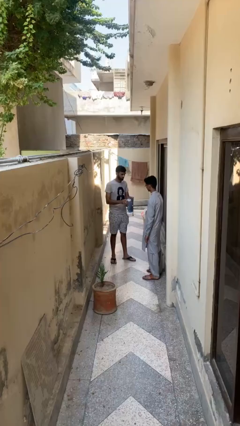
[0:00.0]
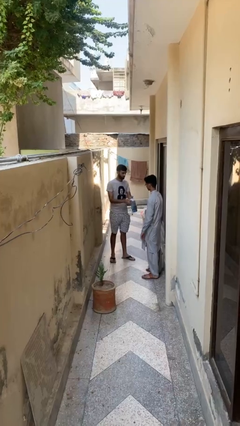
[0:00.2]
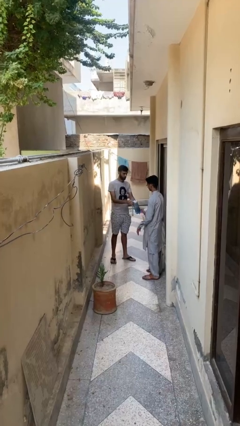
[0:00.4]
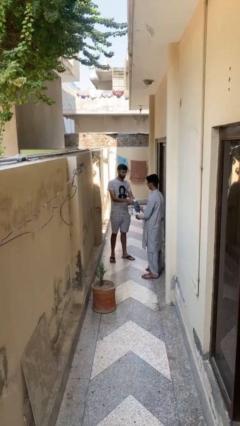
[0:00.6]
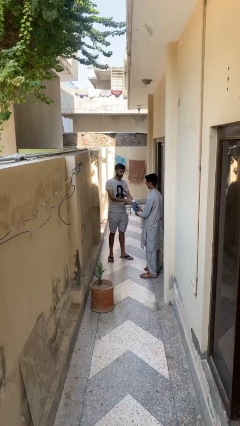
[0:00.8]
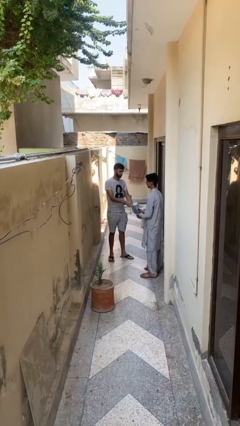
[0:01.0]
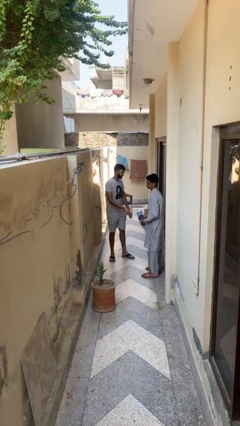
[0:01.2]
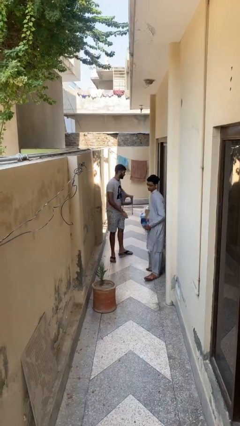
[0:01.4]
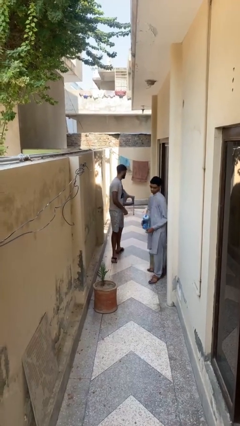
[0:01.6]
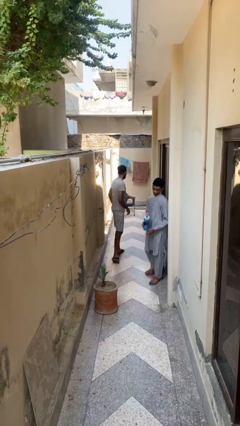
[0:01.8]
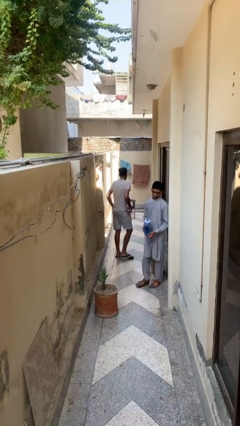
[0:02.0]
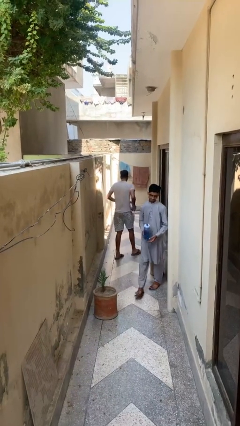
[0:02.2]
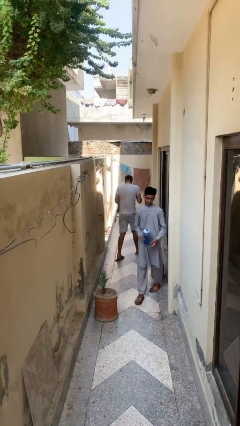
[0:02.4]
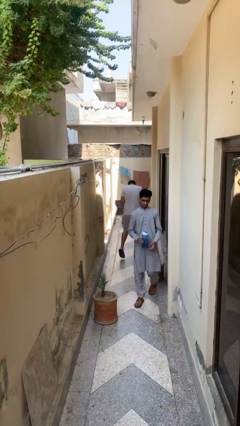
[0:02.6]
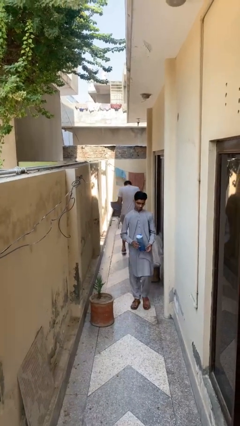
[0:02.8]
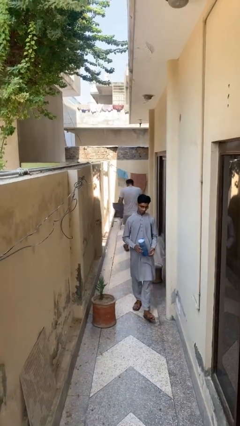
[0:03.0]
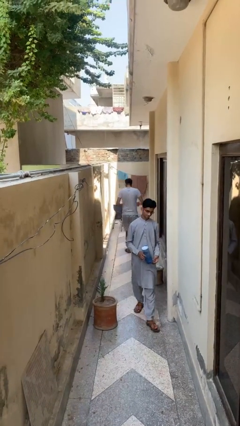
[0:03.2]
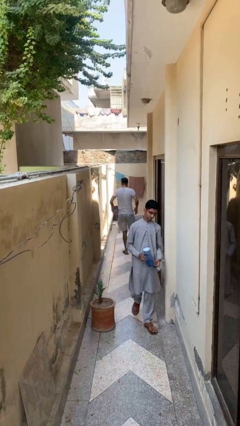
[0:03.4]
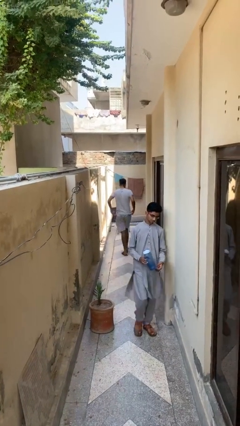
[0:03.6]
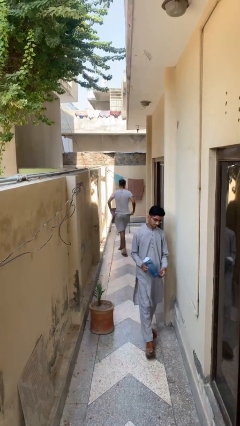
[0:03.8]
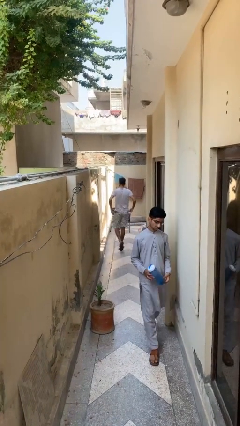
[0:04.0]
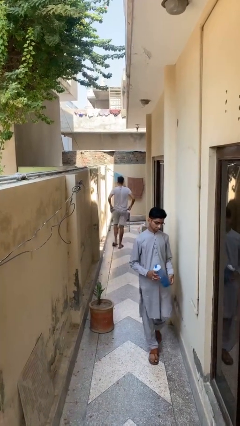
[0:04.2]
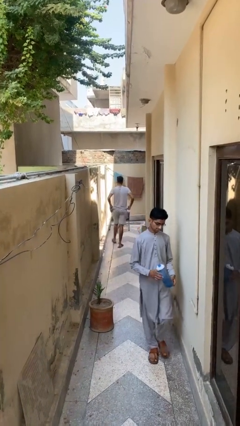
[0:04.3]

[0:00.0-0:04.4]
person transfers object to person

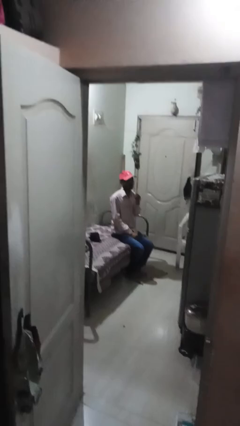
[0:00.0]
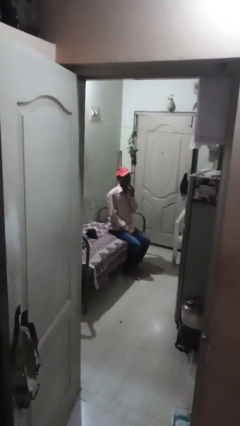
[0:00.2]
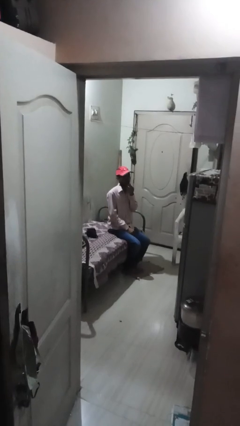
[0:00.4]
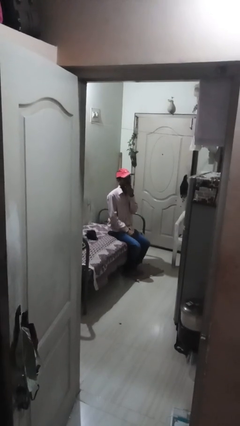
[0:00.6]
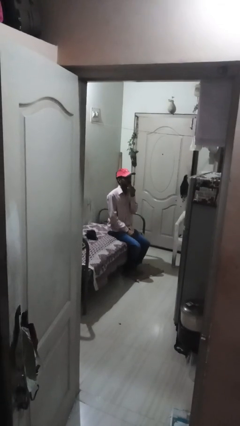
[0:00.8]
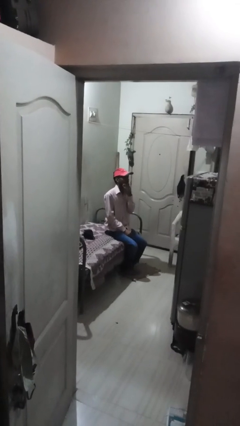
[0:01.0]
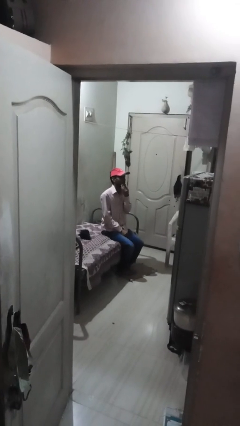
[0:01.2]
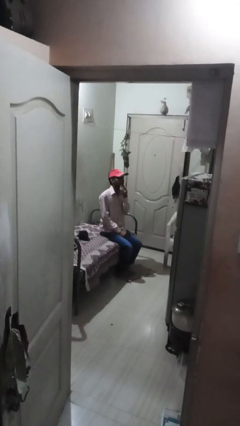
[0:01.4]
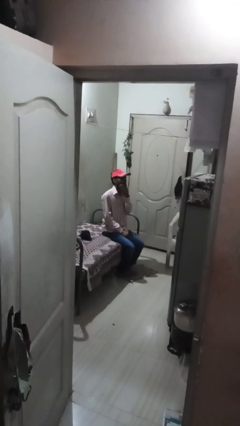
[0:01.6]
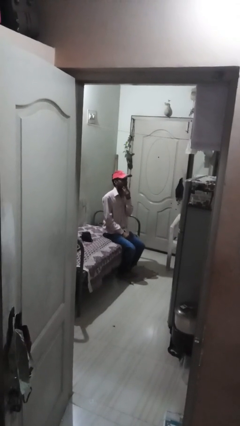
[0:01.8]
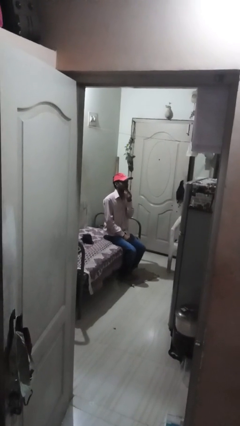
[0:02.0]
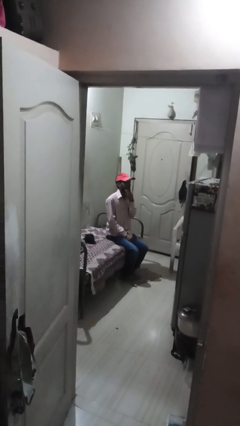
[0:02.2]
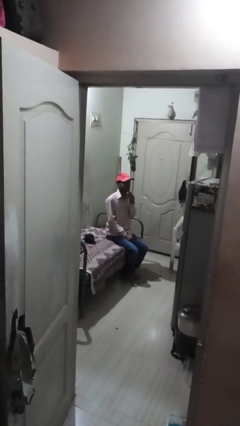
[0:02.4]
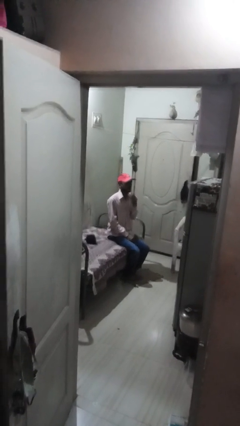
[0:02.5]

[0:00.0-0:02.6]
person strokes chin

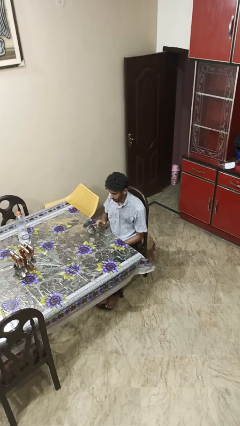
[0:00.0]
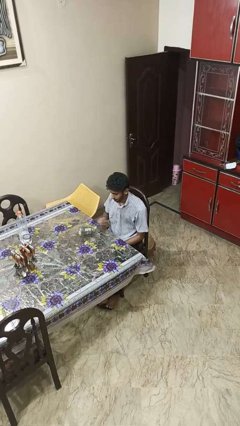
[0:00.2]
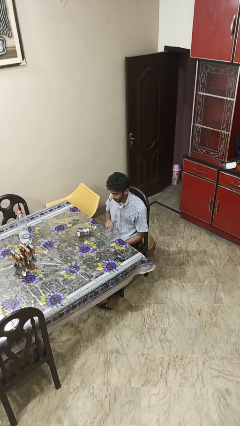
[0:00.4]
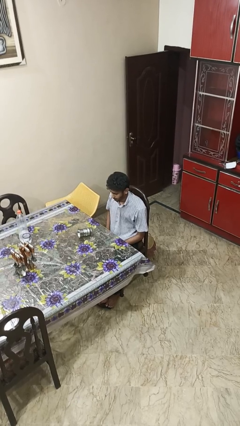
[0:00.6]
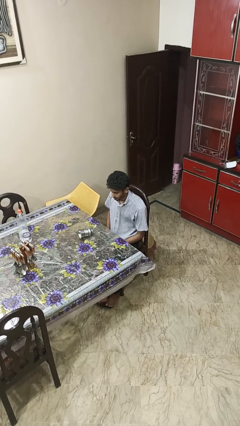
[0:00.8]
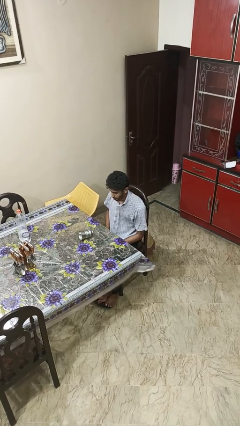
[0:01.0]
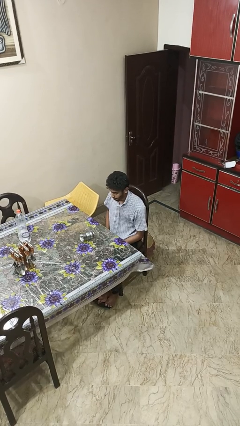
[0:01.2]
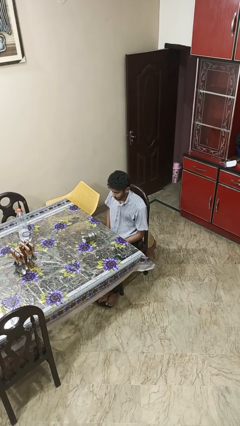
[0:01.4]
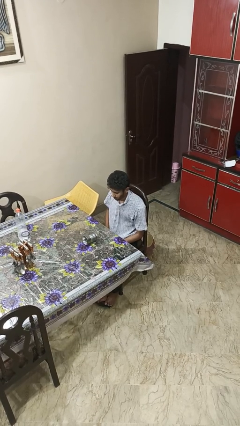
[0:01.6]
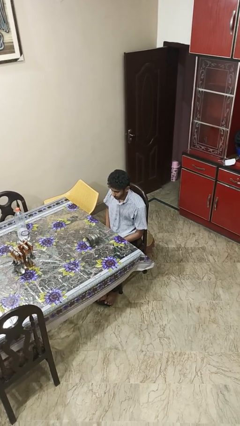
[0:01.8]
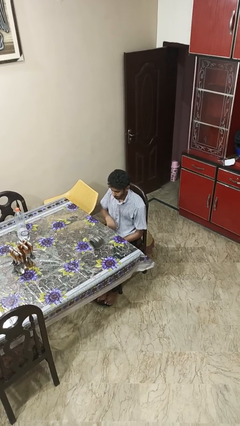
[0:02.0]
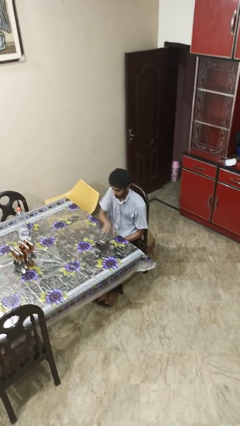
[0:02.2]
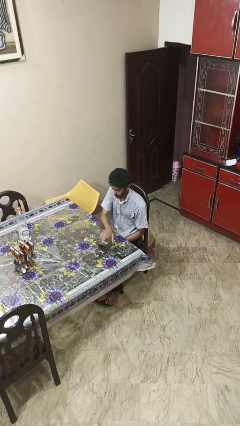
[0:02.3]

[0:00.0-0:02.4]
person knocks over glass

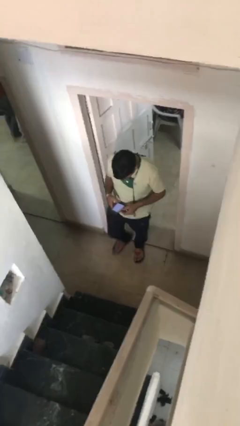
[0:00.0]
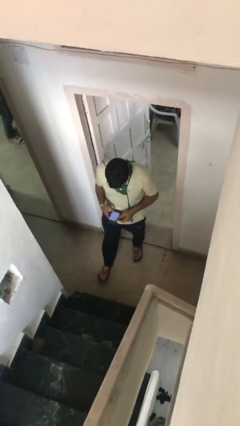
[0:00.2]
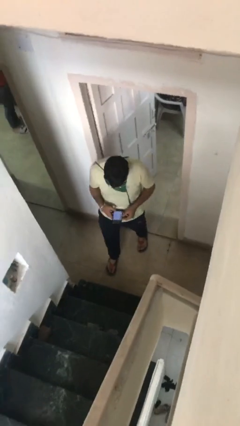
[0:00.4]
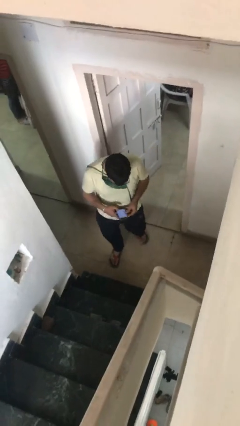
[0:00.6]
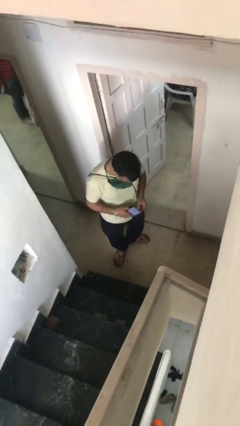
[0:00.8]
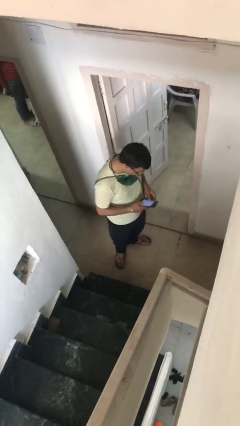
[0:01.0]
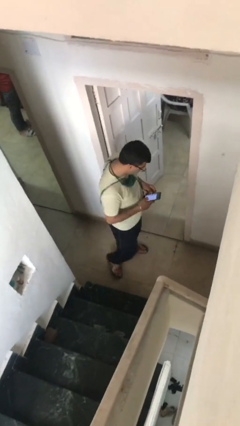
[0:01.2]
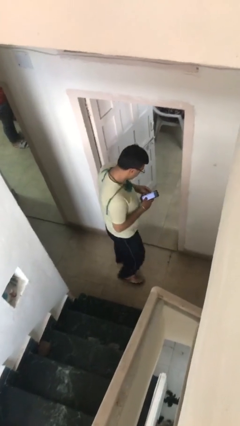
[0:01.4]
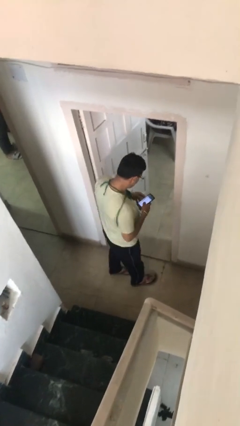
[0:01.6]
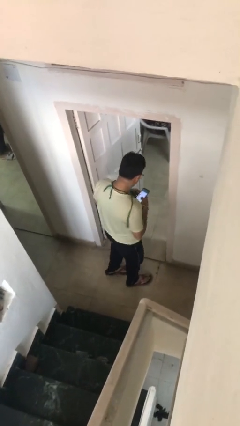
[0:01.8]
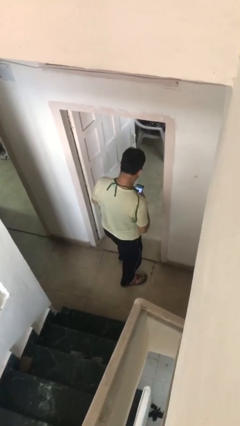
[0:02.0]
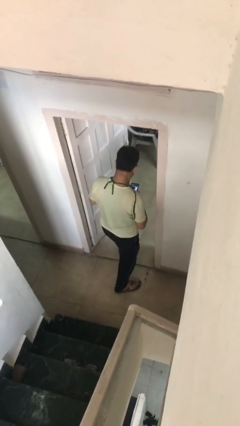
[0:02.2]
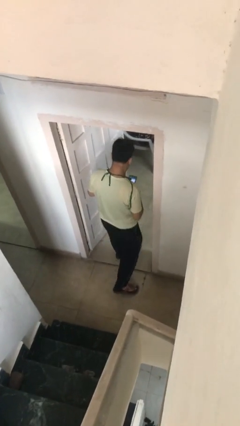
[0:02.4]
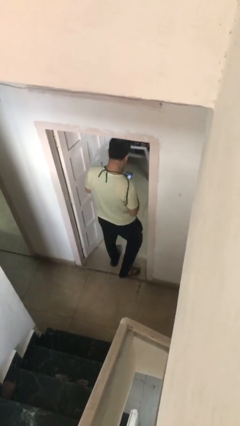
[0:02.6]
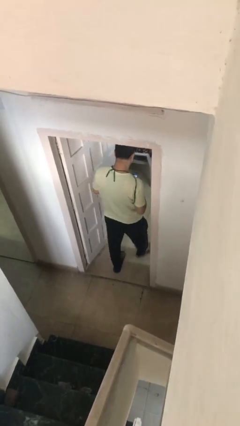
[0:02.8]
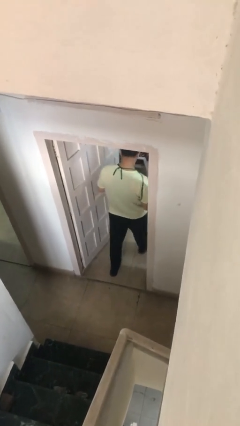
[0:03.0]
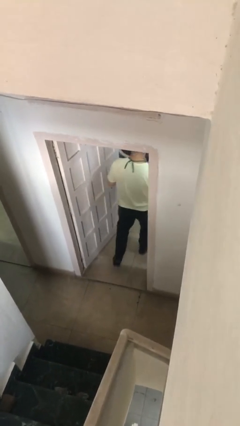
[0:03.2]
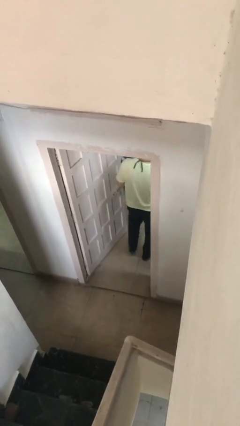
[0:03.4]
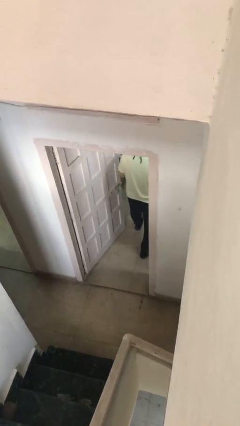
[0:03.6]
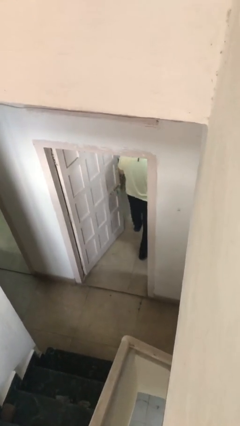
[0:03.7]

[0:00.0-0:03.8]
person exits scene through structure

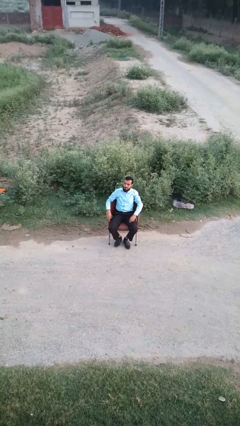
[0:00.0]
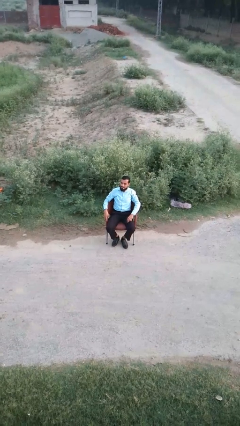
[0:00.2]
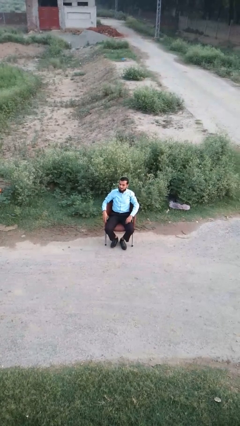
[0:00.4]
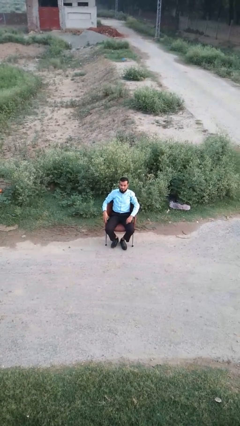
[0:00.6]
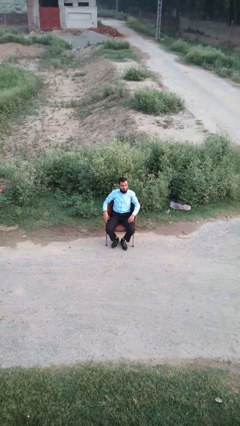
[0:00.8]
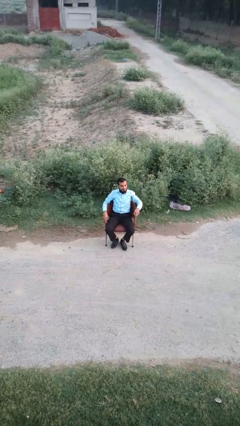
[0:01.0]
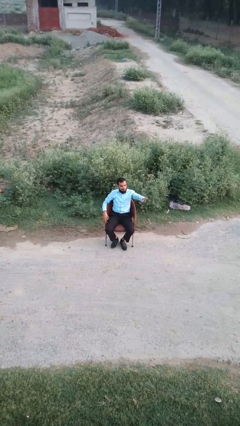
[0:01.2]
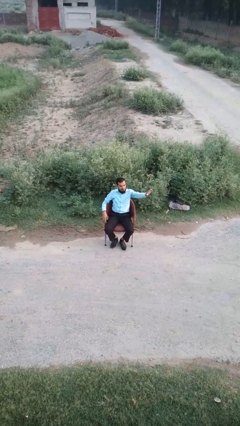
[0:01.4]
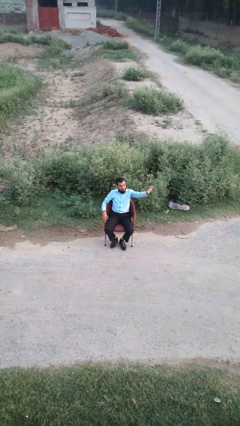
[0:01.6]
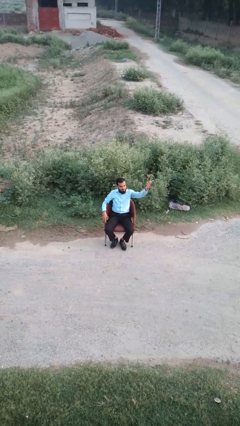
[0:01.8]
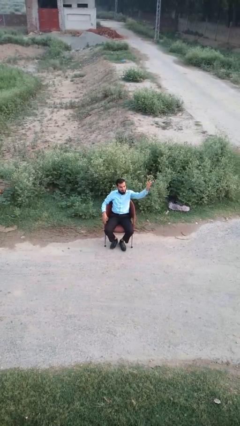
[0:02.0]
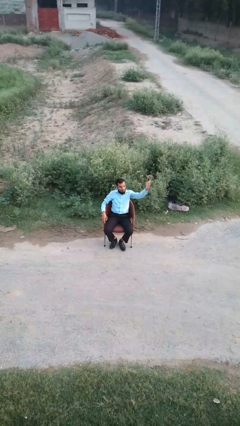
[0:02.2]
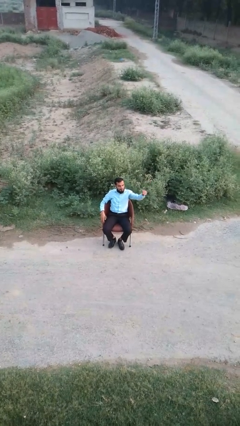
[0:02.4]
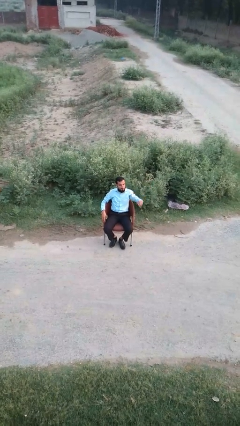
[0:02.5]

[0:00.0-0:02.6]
person gestures lower hand

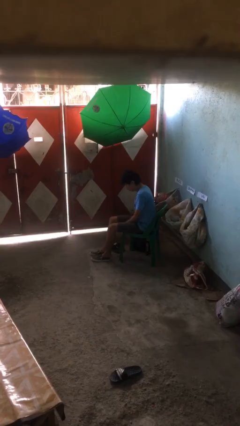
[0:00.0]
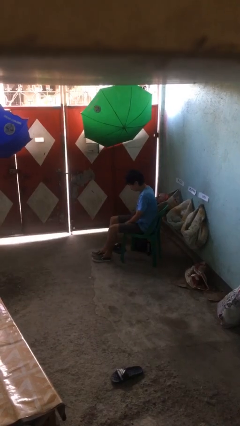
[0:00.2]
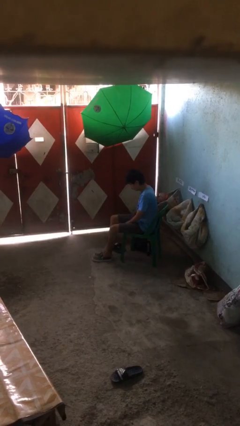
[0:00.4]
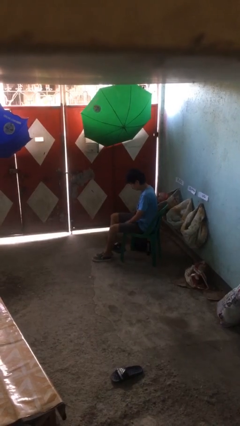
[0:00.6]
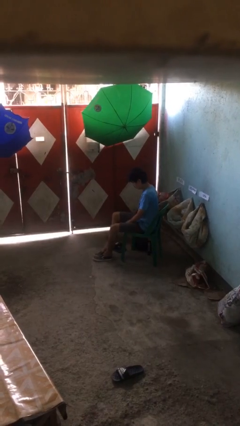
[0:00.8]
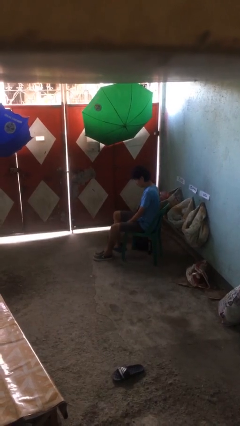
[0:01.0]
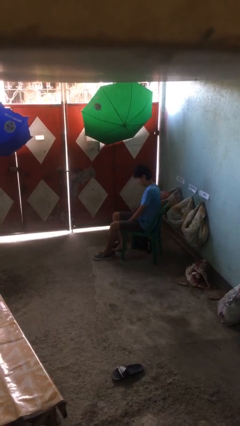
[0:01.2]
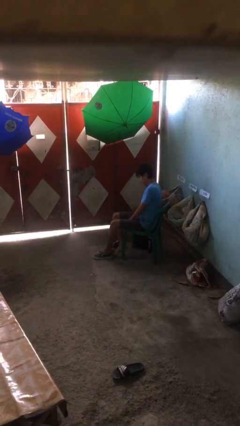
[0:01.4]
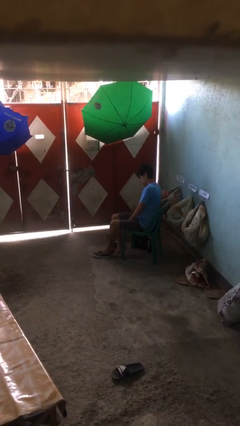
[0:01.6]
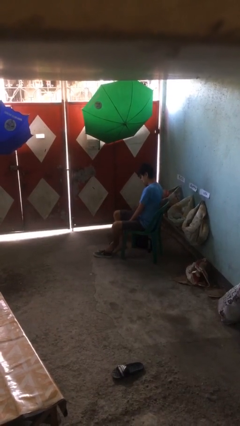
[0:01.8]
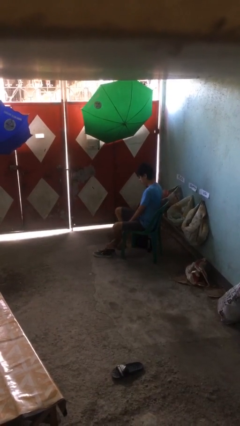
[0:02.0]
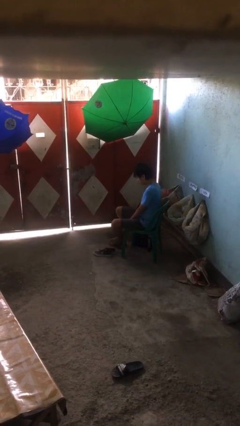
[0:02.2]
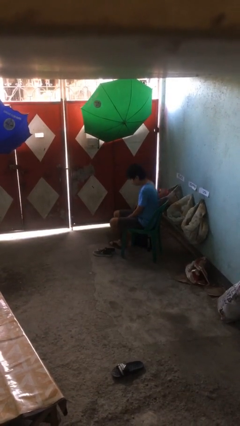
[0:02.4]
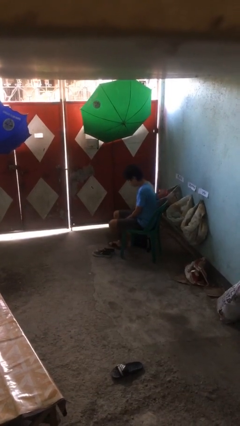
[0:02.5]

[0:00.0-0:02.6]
person takes off shoes
